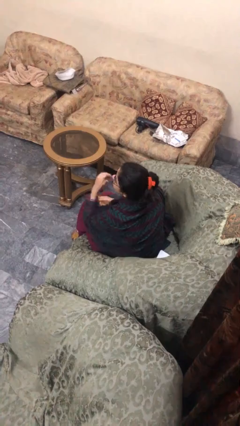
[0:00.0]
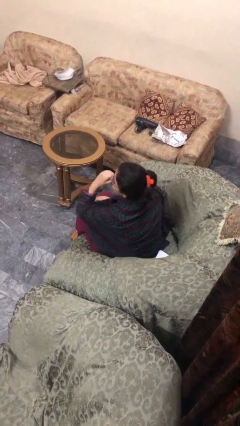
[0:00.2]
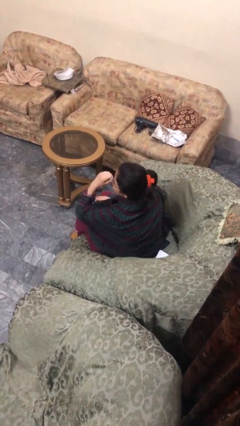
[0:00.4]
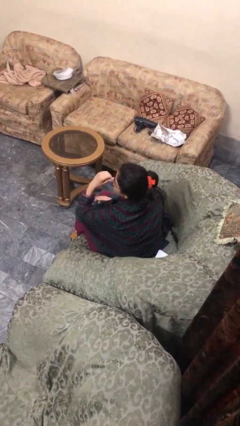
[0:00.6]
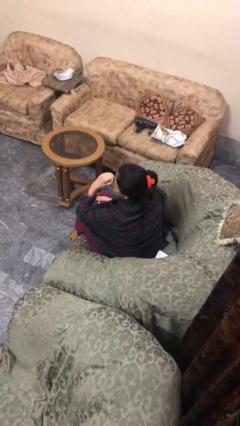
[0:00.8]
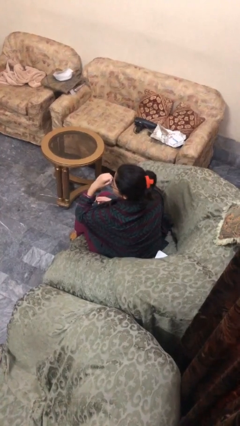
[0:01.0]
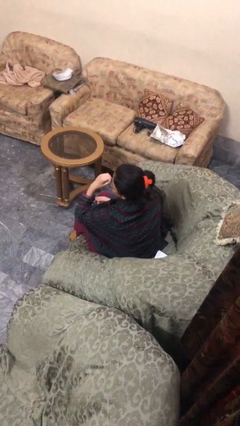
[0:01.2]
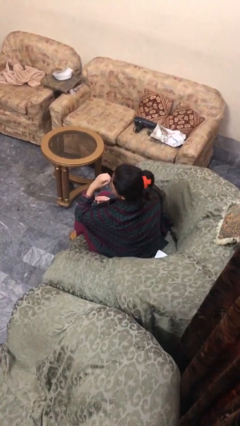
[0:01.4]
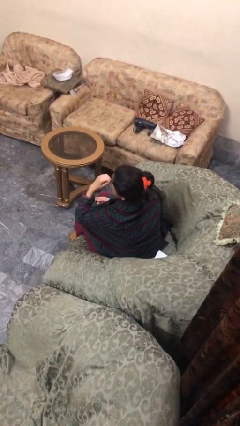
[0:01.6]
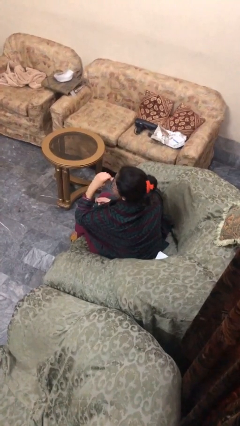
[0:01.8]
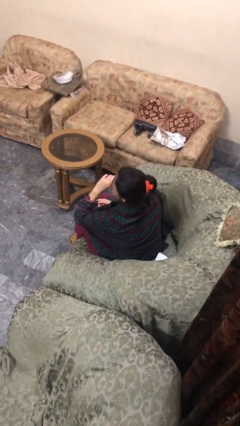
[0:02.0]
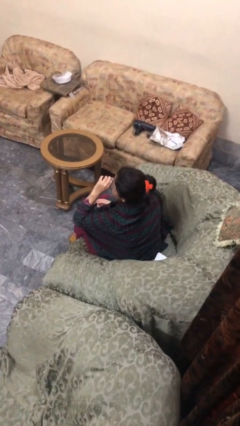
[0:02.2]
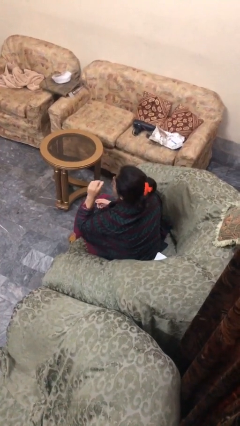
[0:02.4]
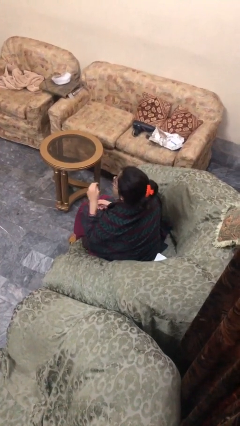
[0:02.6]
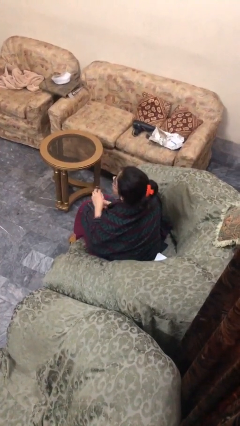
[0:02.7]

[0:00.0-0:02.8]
person blows nose

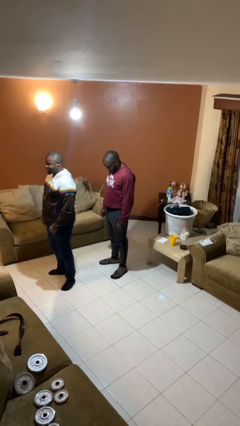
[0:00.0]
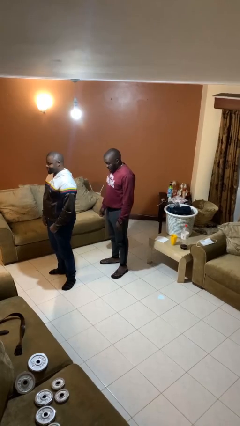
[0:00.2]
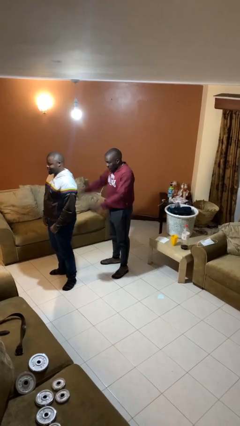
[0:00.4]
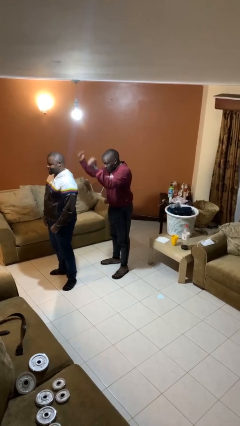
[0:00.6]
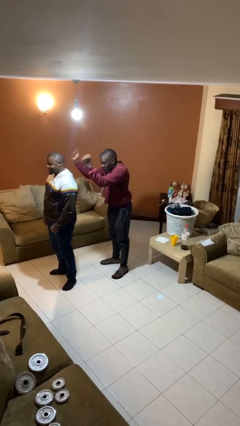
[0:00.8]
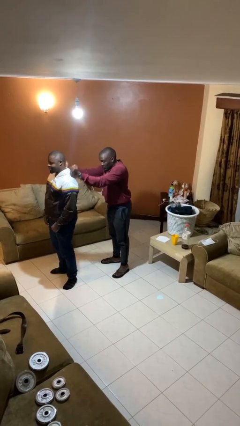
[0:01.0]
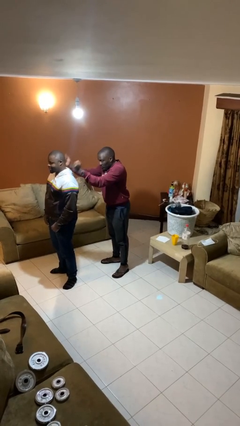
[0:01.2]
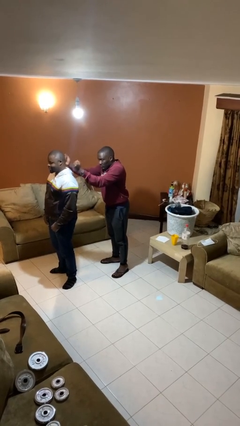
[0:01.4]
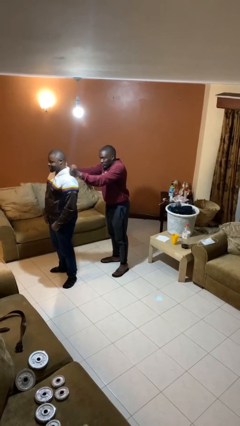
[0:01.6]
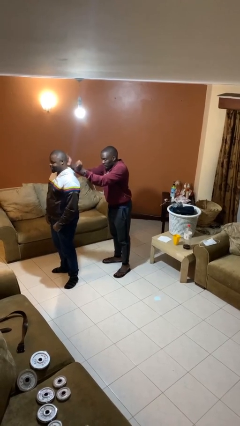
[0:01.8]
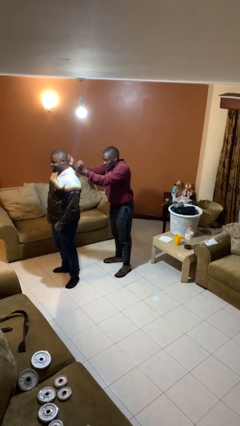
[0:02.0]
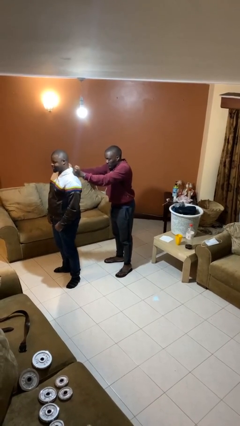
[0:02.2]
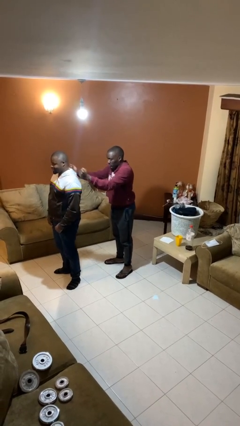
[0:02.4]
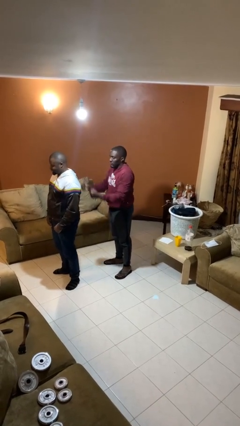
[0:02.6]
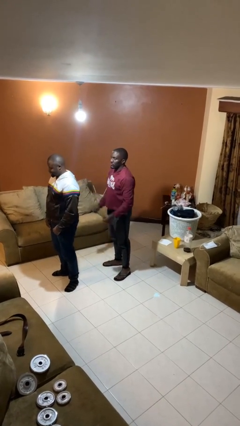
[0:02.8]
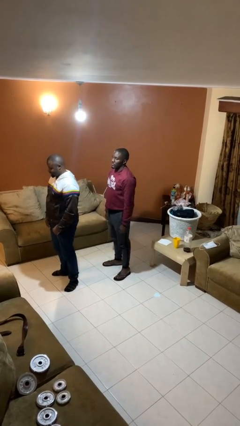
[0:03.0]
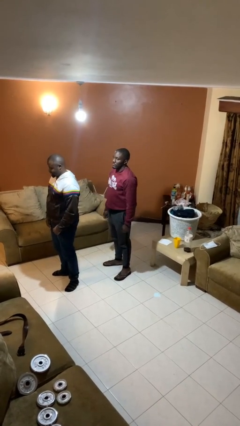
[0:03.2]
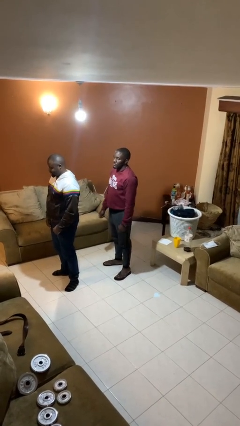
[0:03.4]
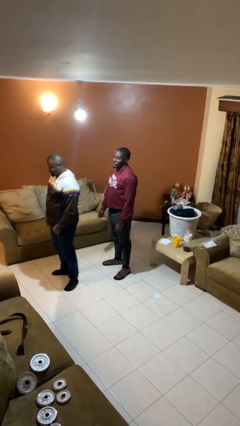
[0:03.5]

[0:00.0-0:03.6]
person pounds shoulders of person

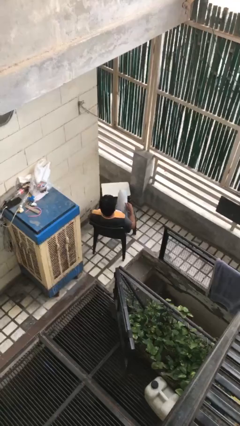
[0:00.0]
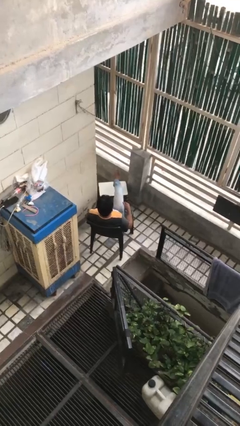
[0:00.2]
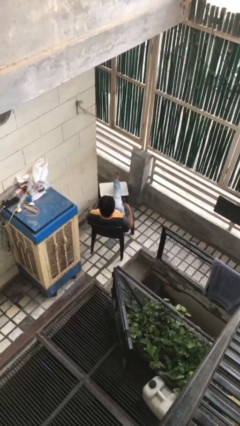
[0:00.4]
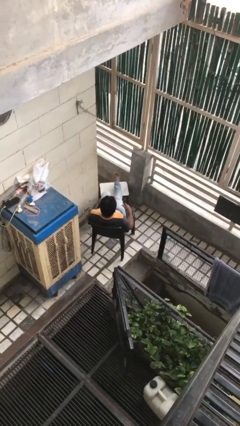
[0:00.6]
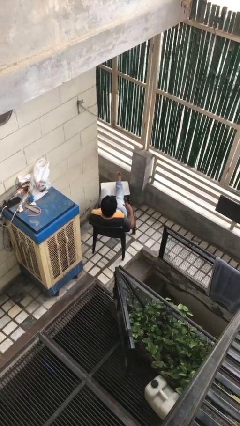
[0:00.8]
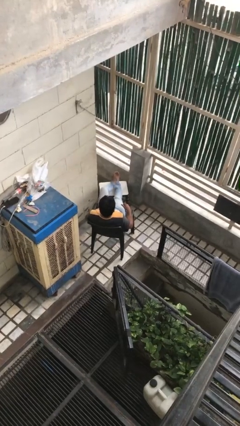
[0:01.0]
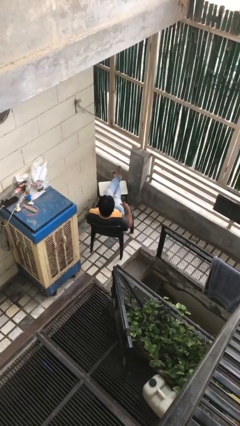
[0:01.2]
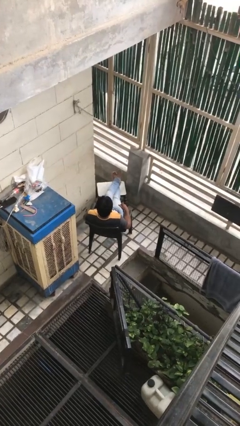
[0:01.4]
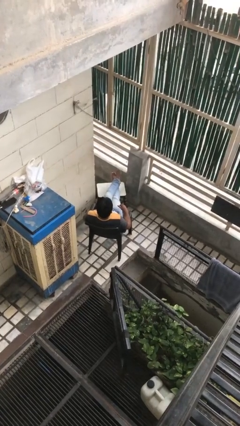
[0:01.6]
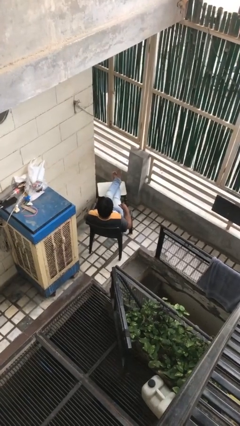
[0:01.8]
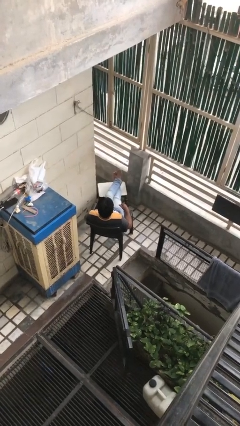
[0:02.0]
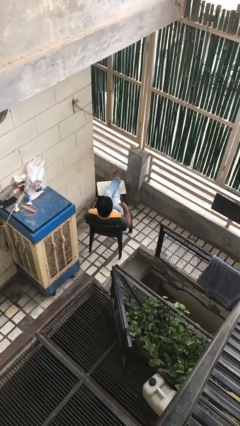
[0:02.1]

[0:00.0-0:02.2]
person puts feet up

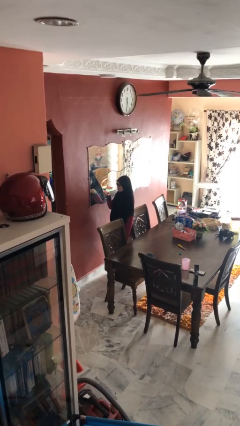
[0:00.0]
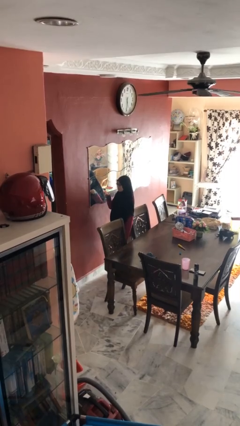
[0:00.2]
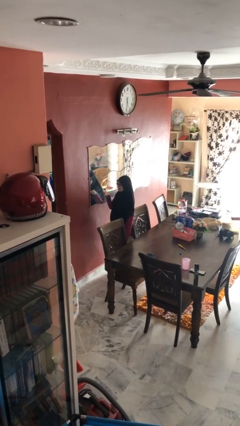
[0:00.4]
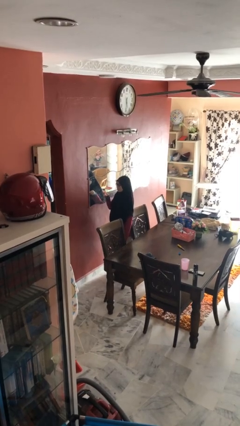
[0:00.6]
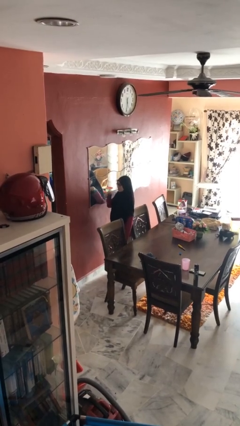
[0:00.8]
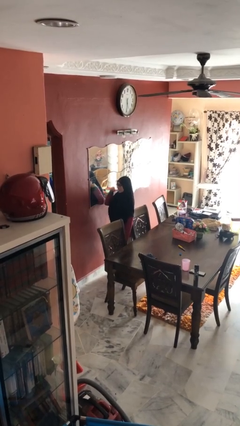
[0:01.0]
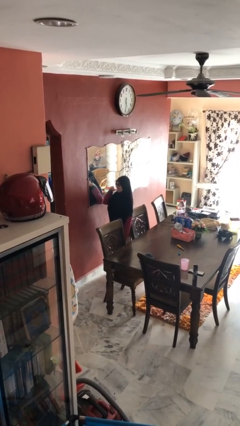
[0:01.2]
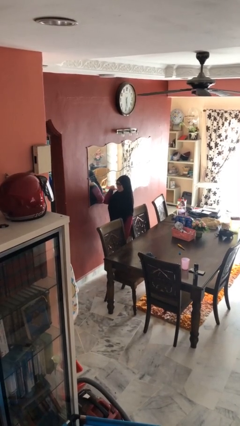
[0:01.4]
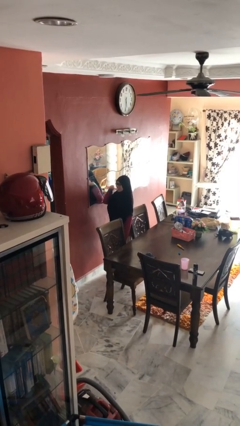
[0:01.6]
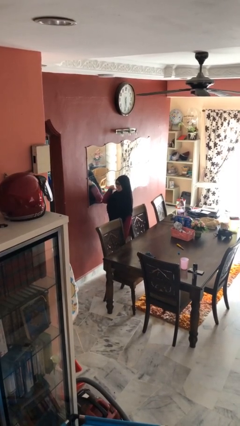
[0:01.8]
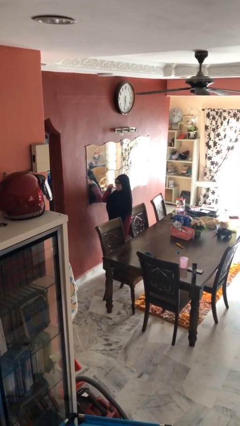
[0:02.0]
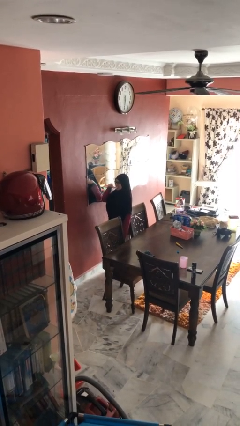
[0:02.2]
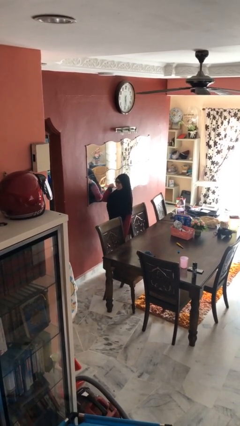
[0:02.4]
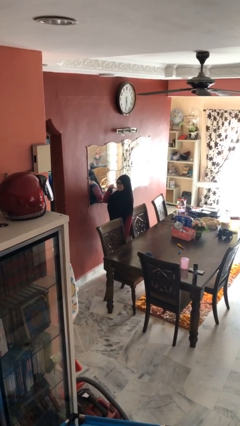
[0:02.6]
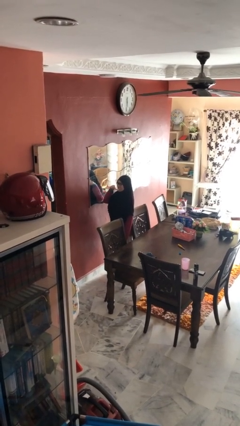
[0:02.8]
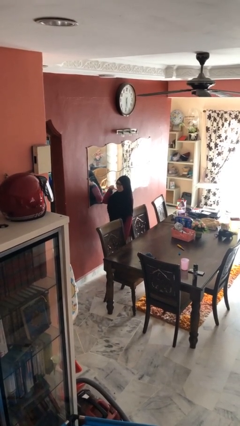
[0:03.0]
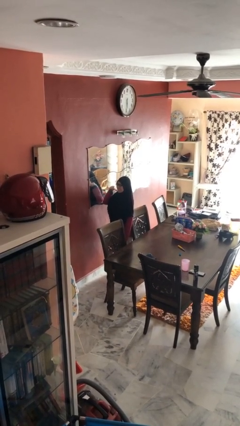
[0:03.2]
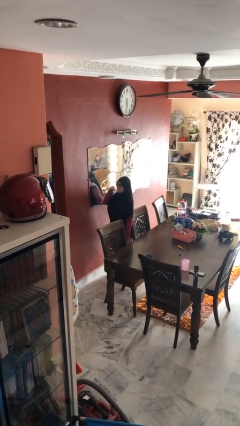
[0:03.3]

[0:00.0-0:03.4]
person brushes teeth

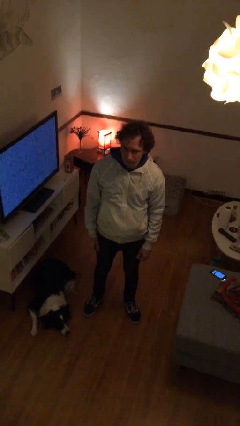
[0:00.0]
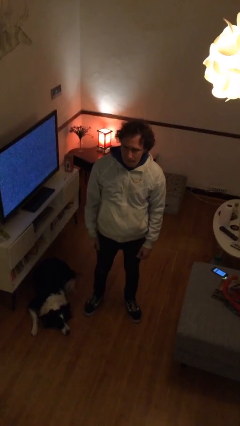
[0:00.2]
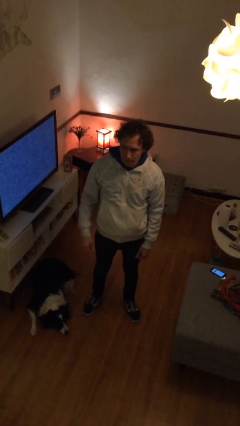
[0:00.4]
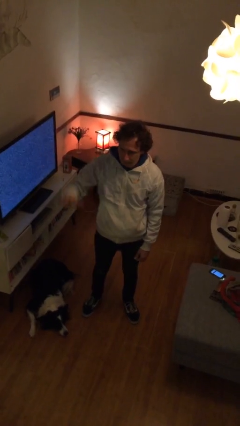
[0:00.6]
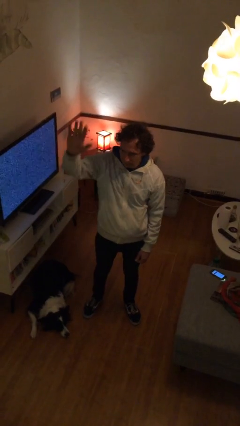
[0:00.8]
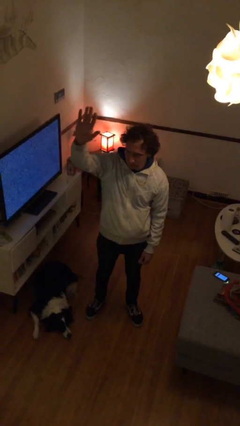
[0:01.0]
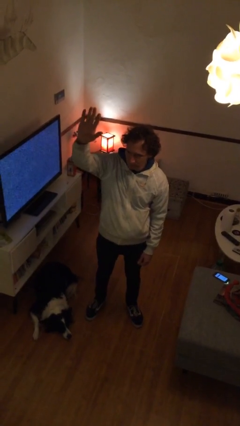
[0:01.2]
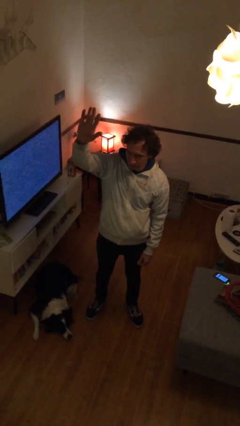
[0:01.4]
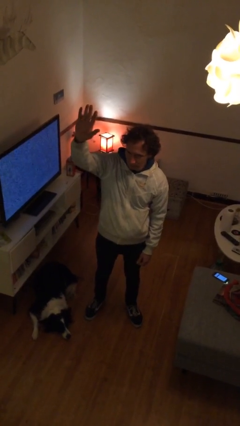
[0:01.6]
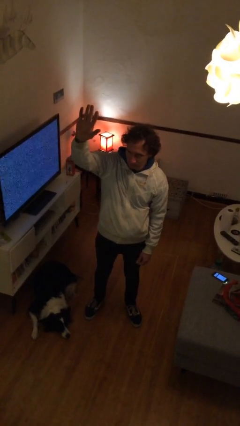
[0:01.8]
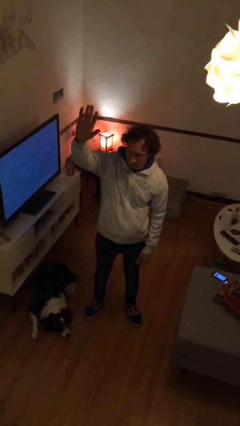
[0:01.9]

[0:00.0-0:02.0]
person gestures raise hand

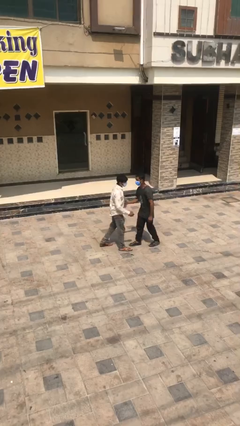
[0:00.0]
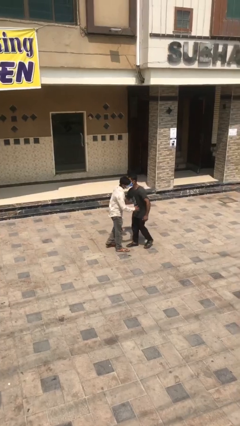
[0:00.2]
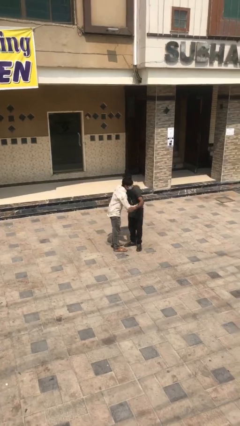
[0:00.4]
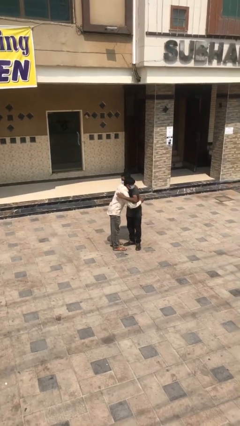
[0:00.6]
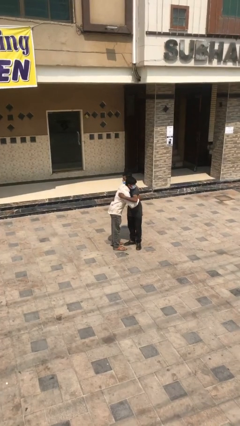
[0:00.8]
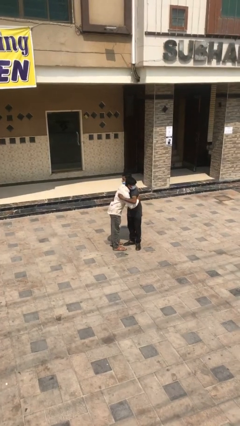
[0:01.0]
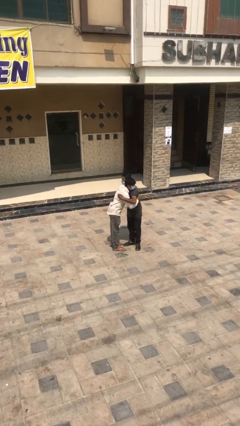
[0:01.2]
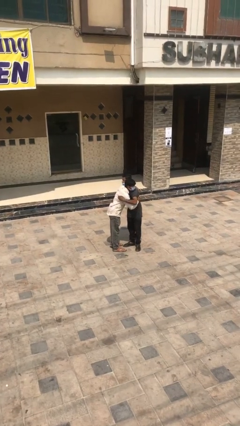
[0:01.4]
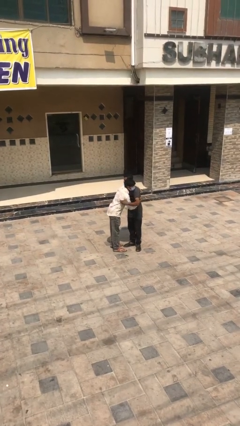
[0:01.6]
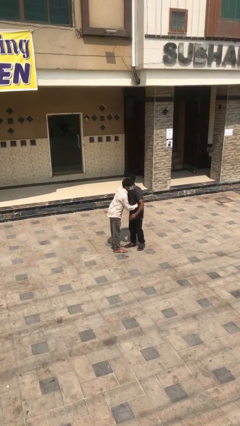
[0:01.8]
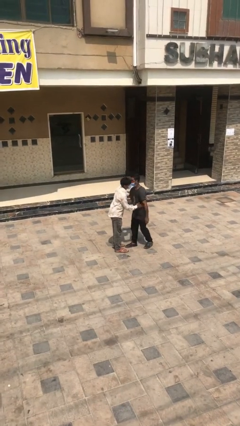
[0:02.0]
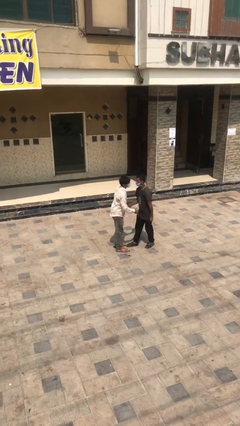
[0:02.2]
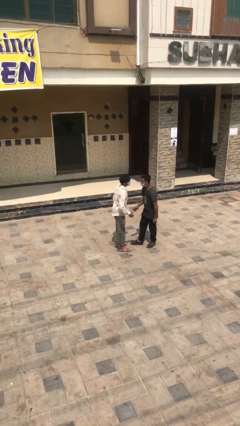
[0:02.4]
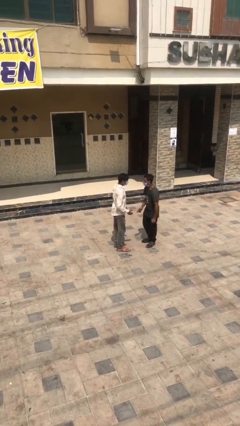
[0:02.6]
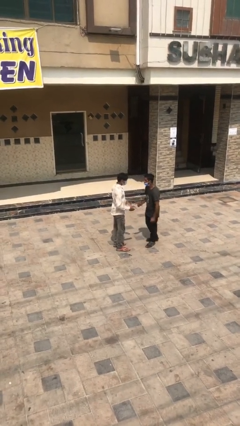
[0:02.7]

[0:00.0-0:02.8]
person embraces person

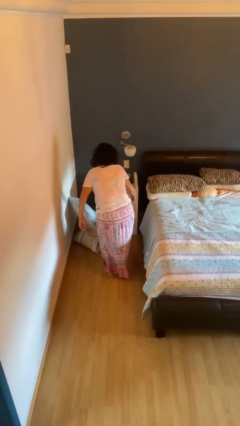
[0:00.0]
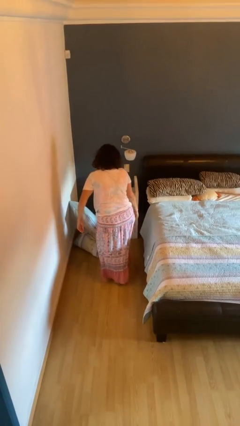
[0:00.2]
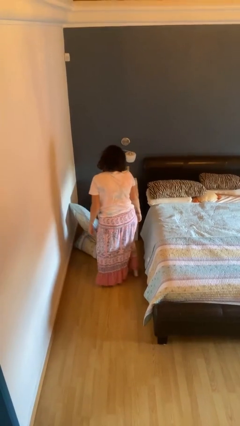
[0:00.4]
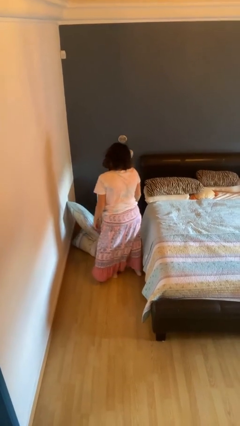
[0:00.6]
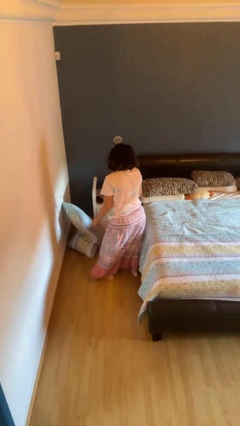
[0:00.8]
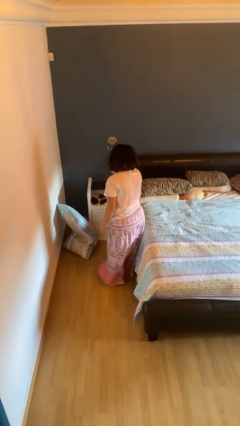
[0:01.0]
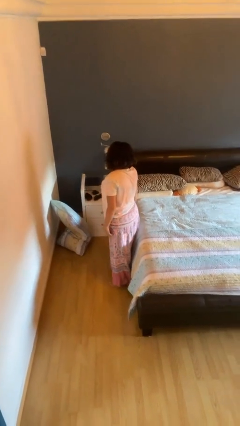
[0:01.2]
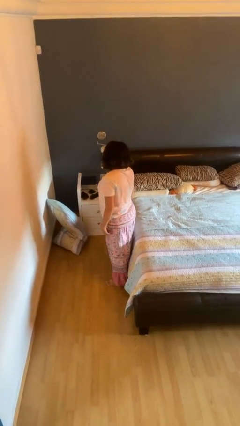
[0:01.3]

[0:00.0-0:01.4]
person stands up from floor
